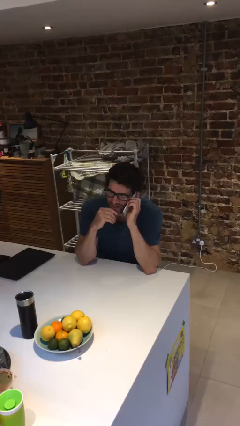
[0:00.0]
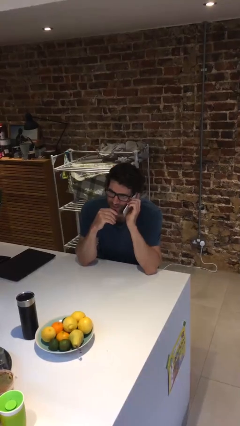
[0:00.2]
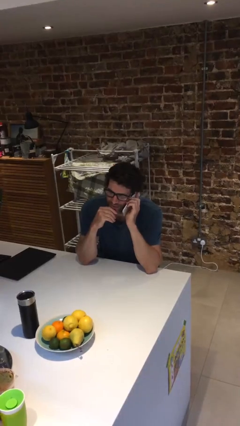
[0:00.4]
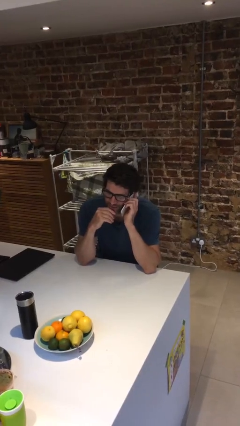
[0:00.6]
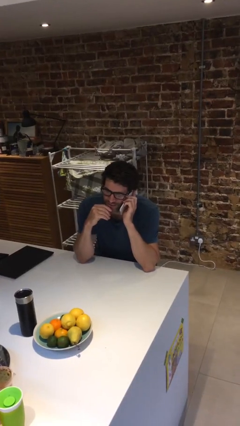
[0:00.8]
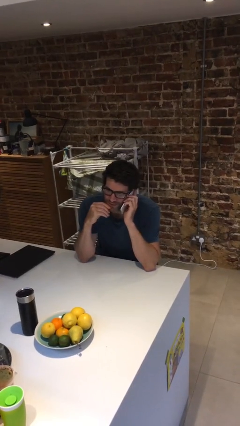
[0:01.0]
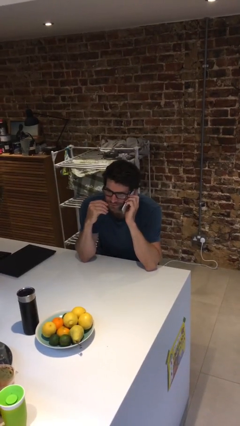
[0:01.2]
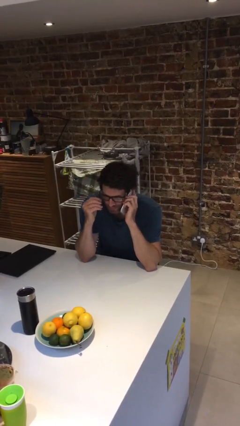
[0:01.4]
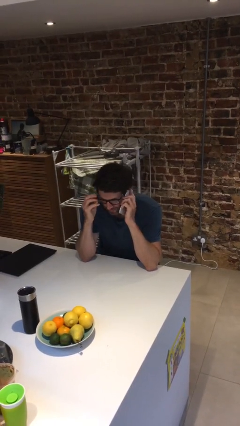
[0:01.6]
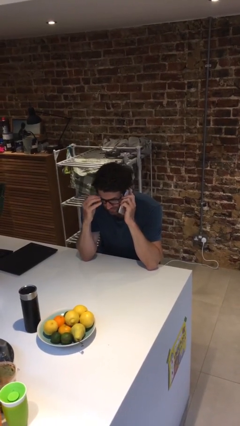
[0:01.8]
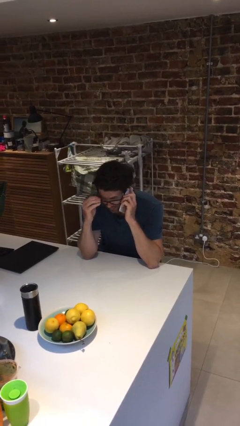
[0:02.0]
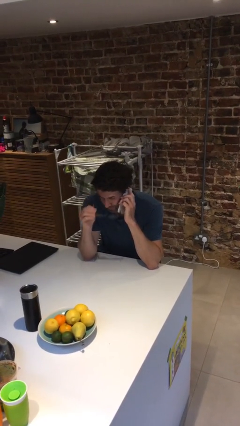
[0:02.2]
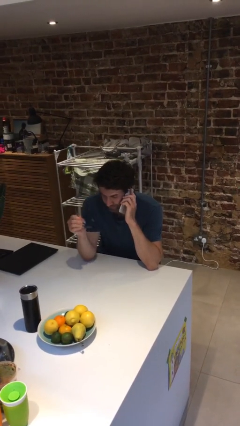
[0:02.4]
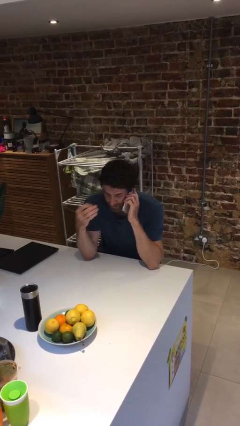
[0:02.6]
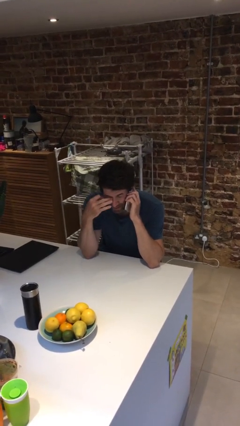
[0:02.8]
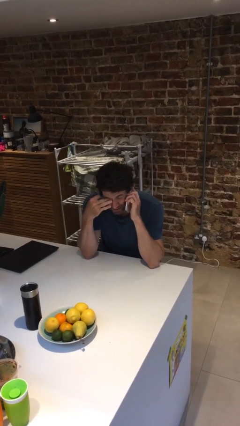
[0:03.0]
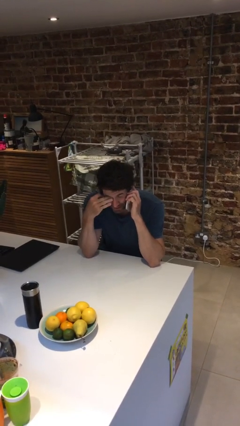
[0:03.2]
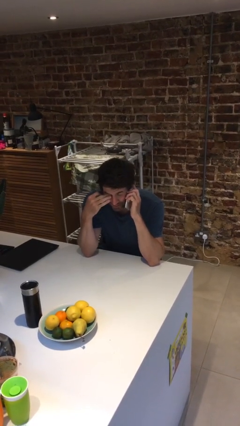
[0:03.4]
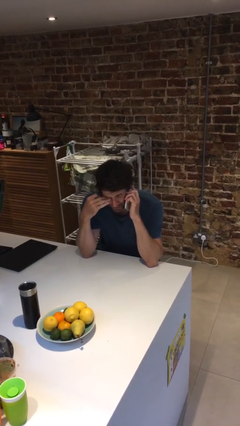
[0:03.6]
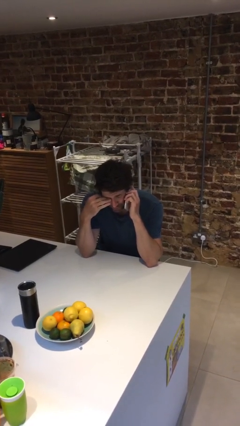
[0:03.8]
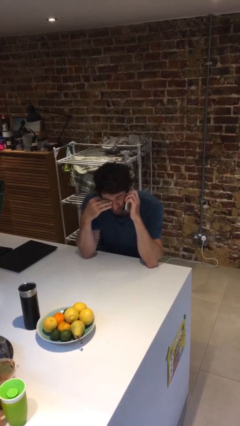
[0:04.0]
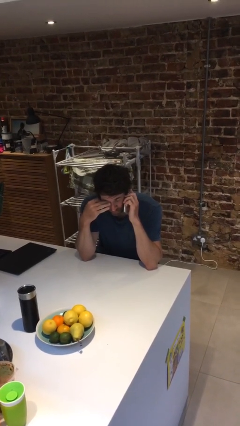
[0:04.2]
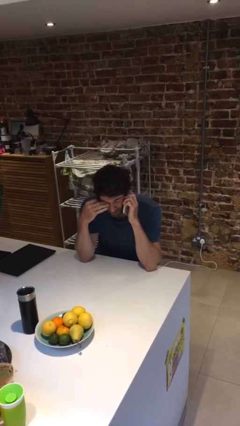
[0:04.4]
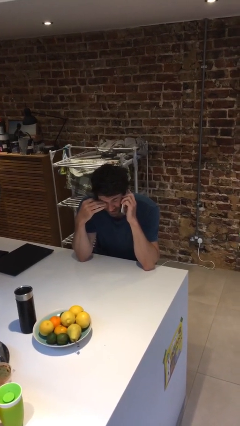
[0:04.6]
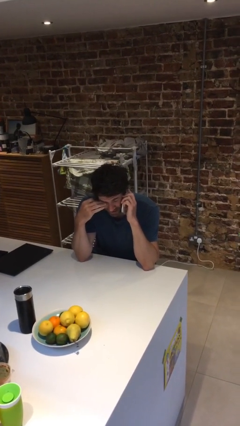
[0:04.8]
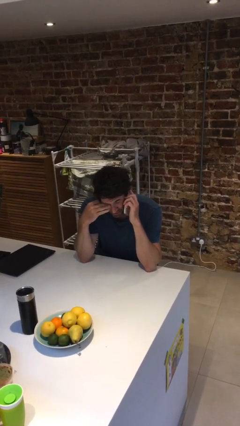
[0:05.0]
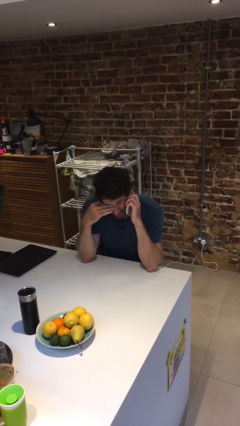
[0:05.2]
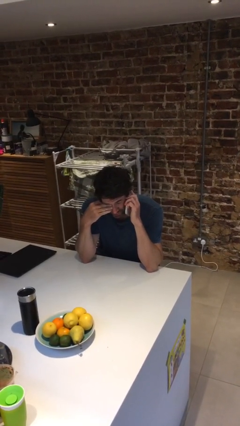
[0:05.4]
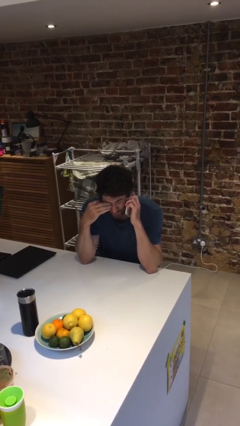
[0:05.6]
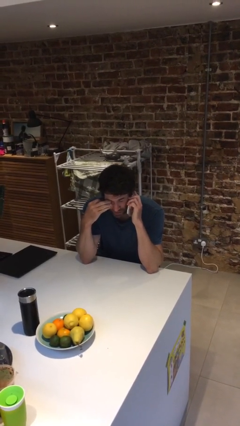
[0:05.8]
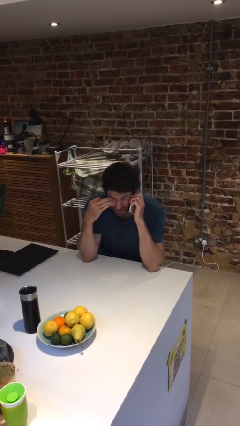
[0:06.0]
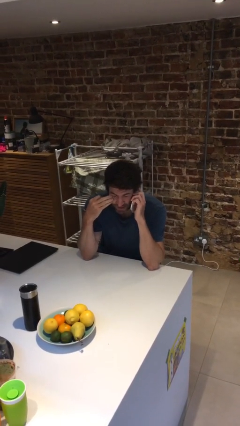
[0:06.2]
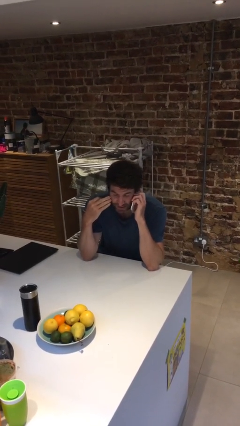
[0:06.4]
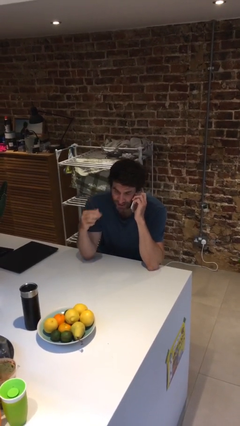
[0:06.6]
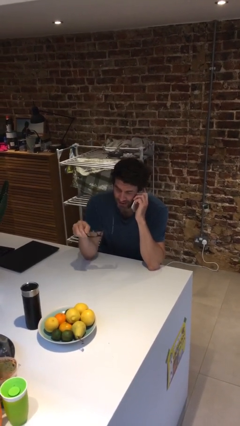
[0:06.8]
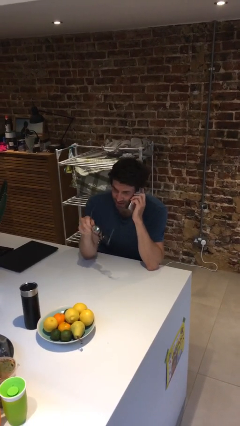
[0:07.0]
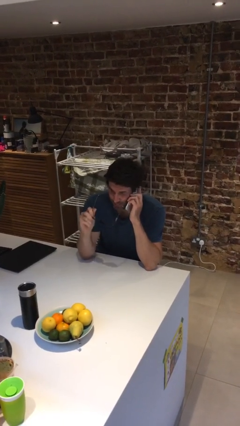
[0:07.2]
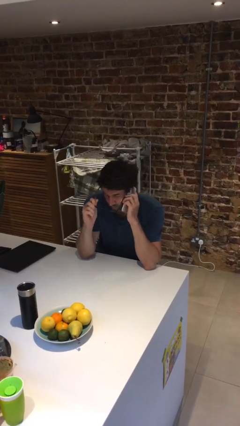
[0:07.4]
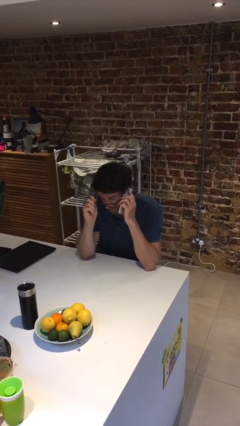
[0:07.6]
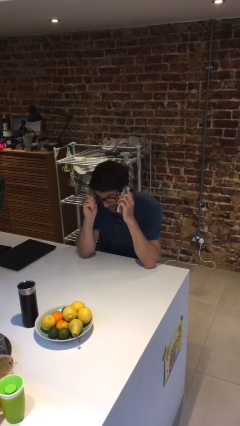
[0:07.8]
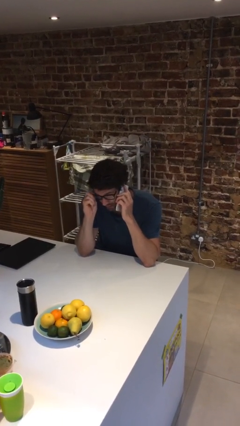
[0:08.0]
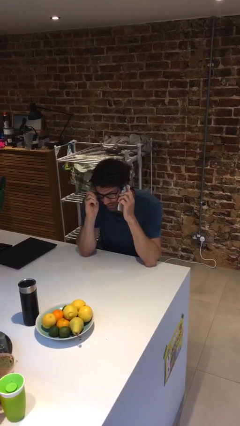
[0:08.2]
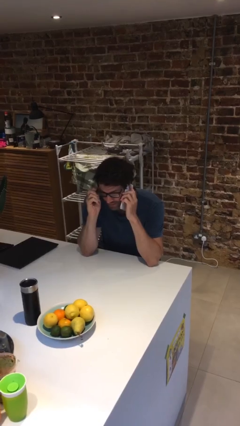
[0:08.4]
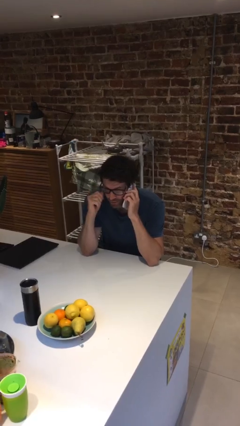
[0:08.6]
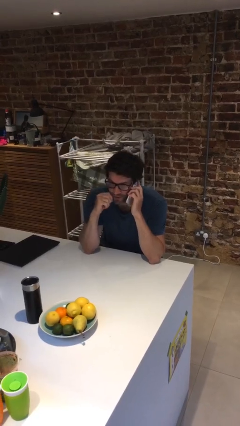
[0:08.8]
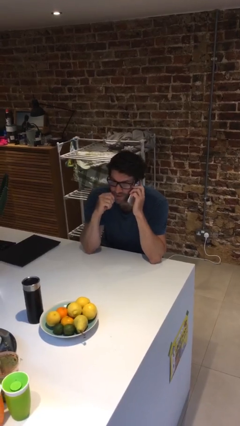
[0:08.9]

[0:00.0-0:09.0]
person talks on phone

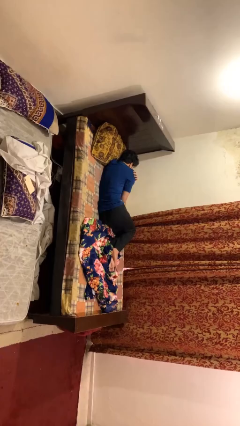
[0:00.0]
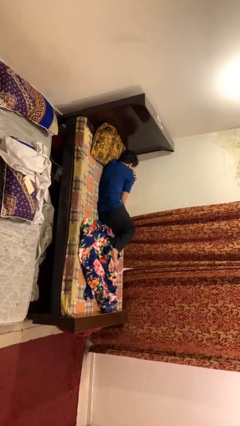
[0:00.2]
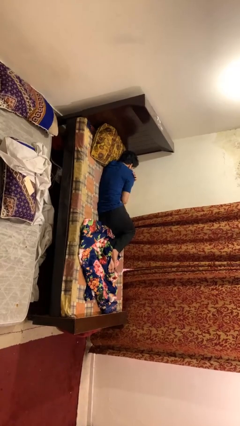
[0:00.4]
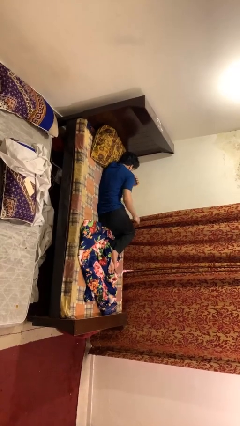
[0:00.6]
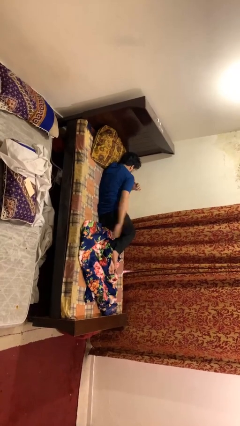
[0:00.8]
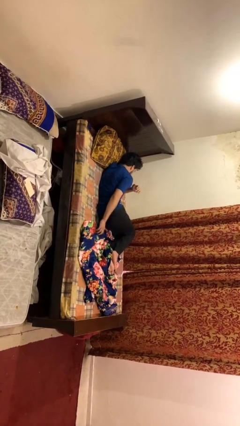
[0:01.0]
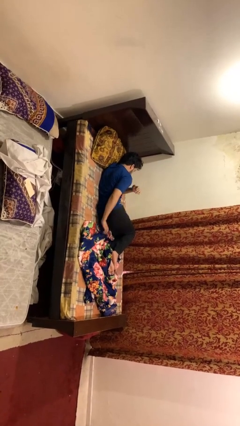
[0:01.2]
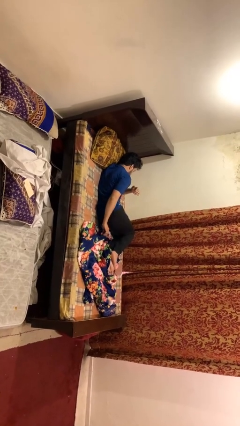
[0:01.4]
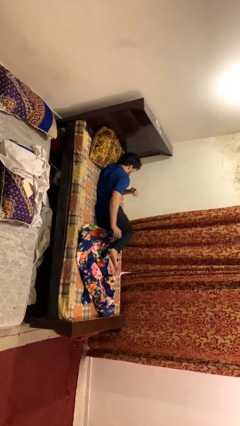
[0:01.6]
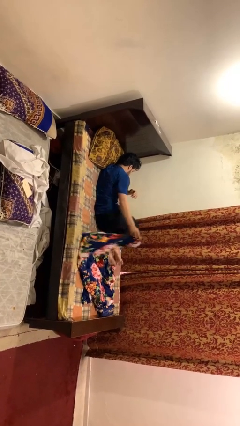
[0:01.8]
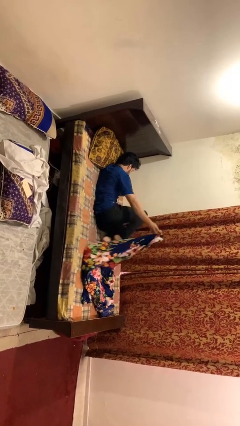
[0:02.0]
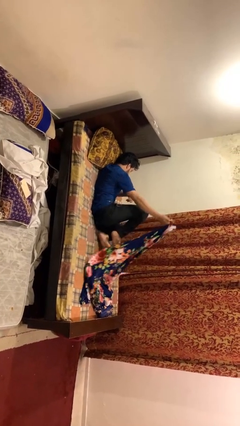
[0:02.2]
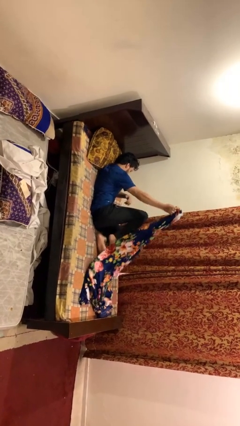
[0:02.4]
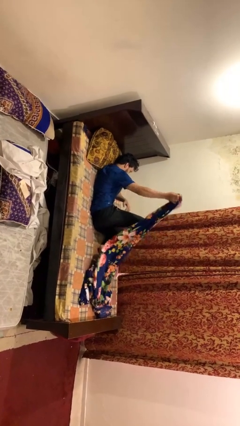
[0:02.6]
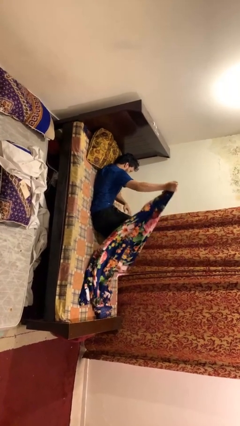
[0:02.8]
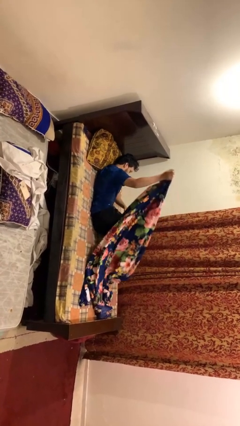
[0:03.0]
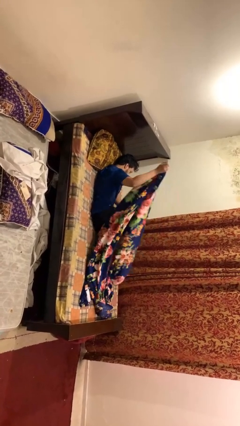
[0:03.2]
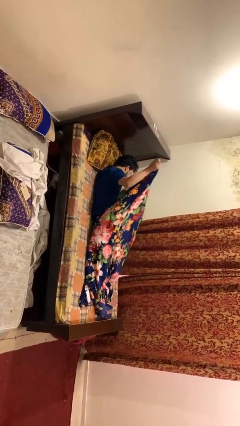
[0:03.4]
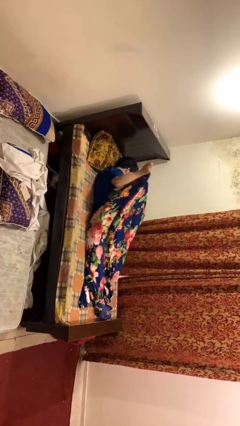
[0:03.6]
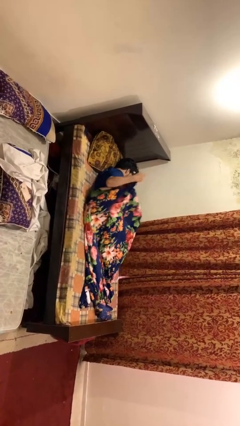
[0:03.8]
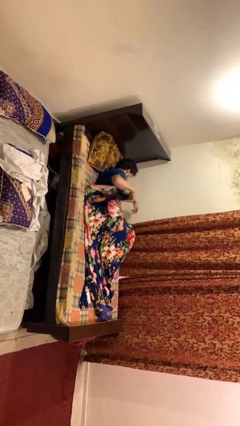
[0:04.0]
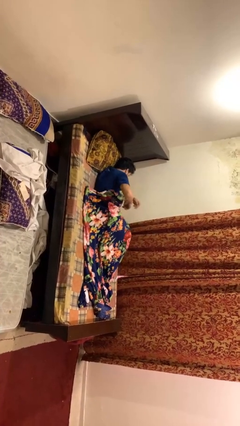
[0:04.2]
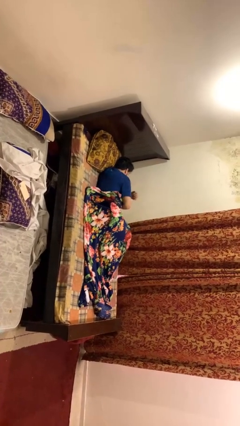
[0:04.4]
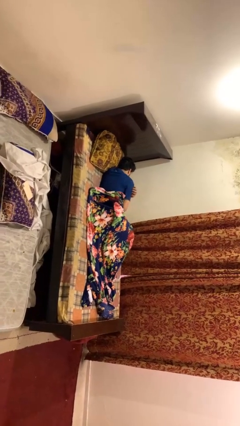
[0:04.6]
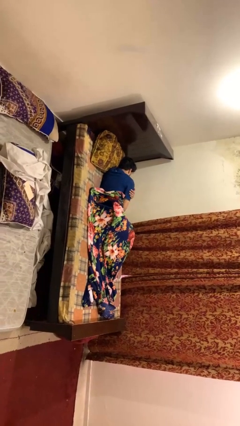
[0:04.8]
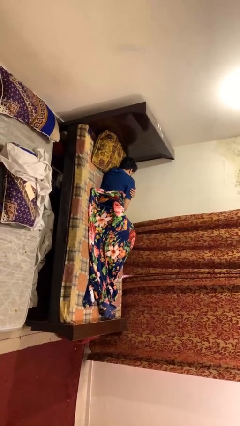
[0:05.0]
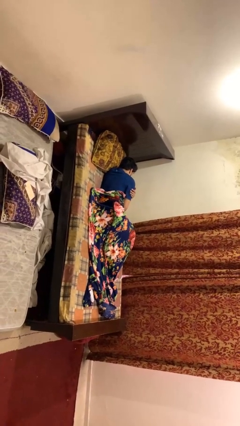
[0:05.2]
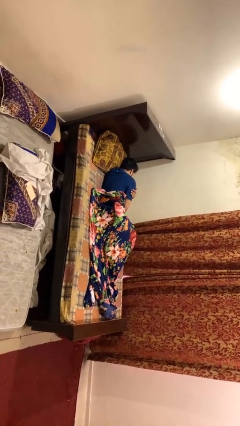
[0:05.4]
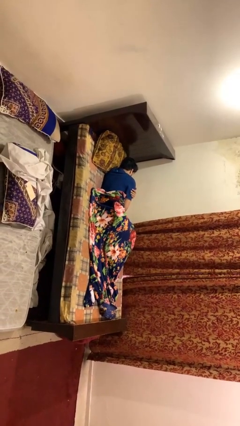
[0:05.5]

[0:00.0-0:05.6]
person covers with blanket

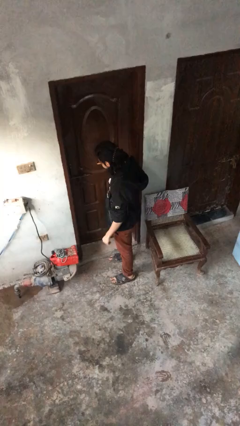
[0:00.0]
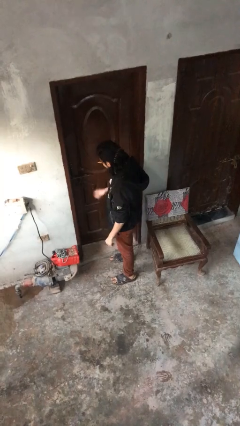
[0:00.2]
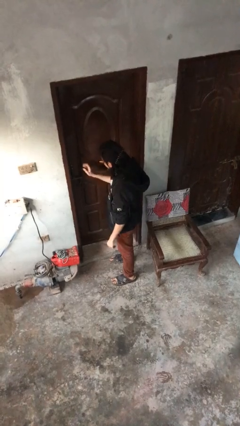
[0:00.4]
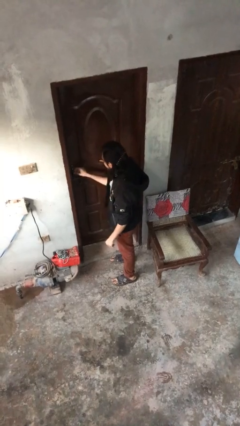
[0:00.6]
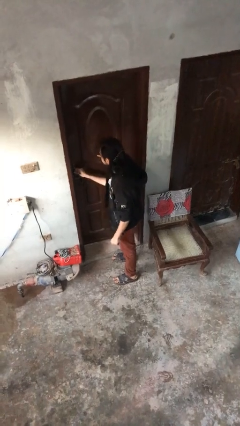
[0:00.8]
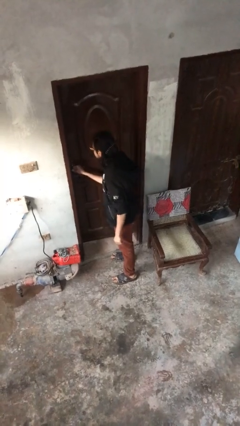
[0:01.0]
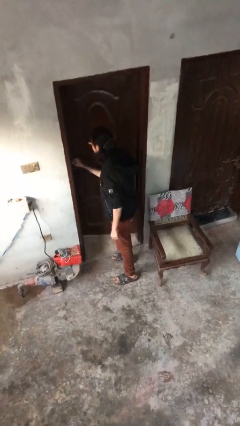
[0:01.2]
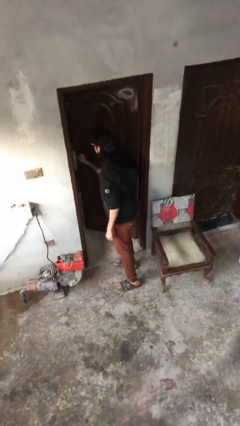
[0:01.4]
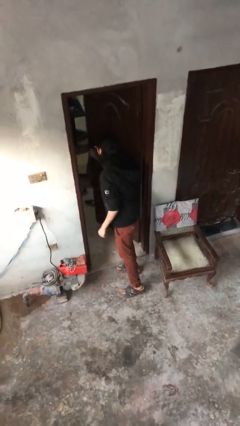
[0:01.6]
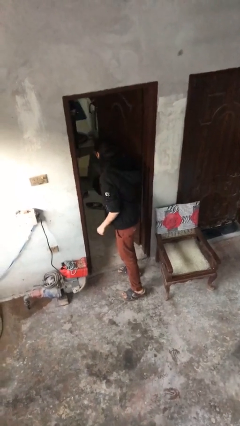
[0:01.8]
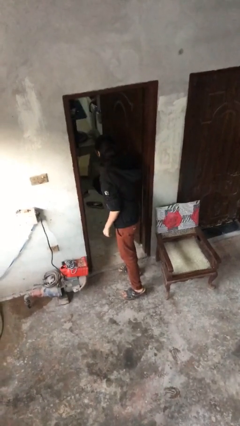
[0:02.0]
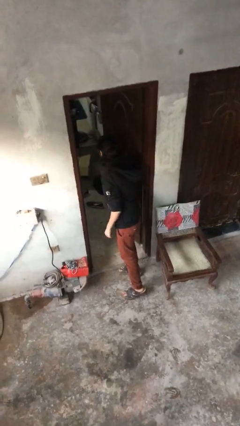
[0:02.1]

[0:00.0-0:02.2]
person opens facility door

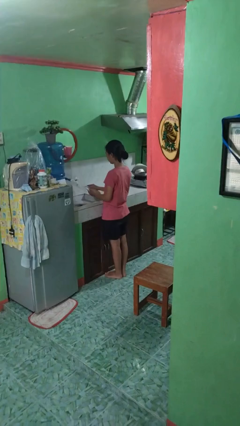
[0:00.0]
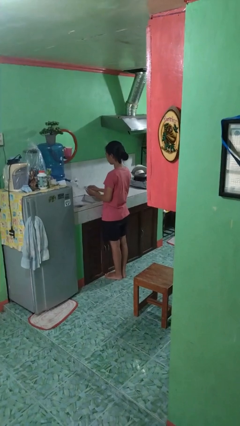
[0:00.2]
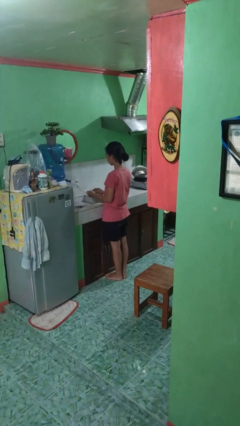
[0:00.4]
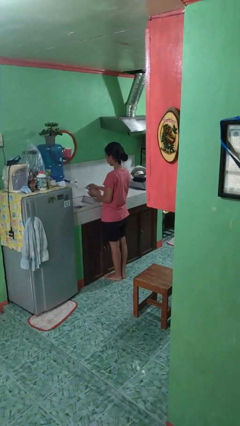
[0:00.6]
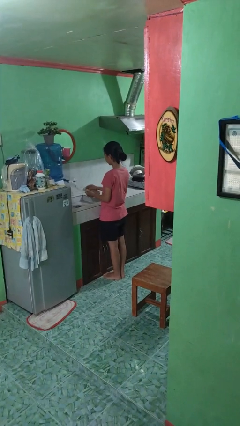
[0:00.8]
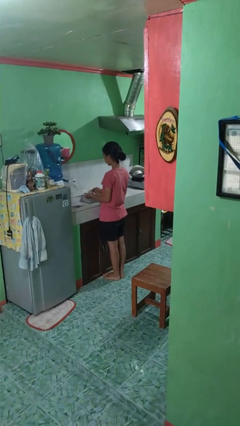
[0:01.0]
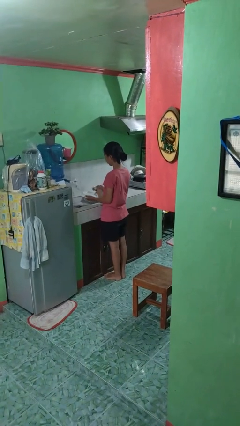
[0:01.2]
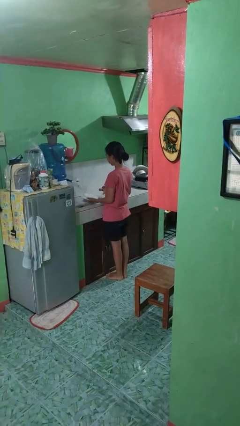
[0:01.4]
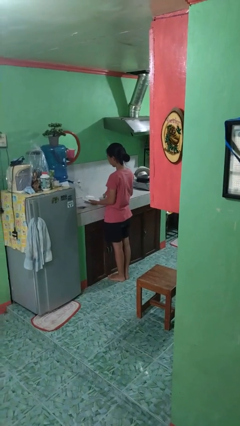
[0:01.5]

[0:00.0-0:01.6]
person dries dish
